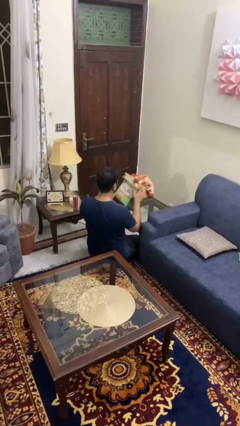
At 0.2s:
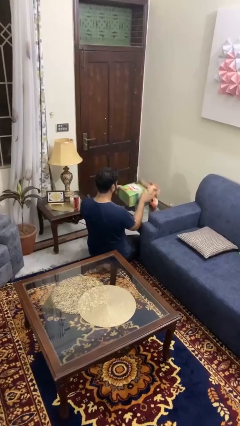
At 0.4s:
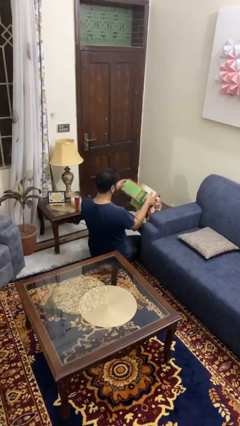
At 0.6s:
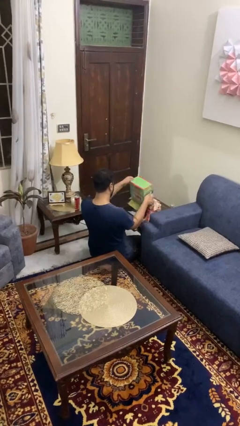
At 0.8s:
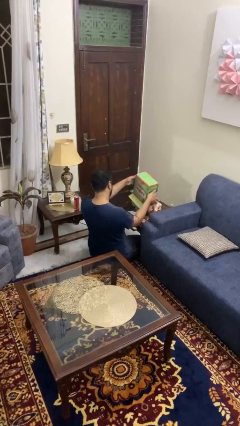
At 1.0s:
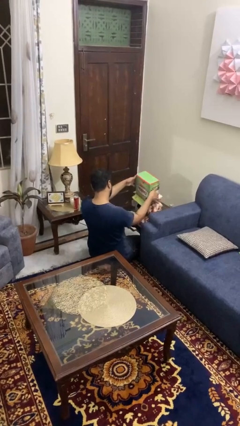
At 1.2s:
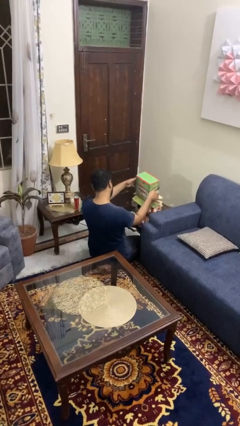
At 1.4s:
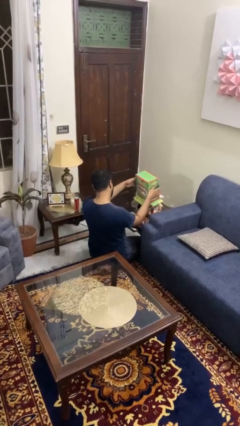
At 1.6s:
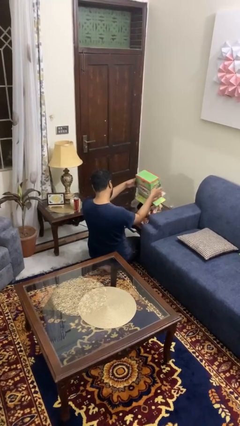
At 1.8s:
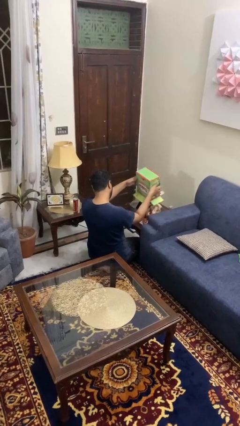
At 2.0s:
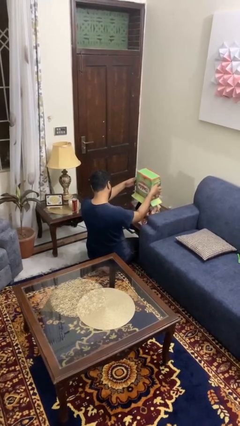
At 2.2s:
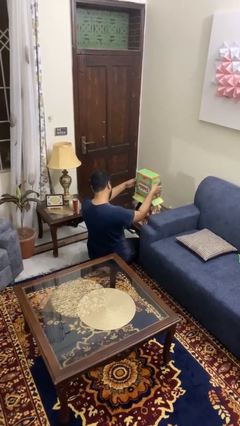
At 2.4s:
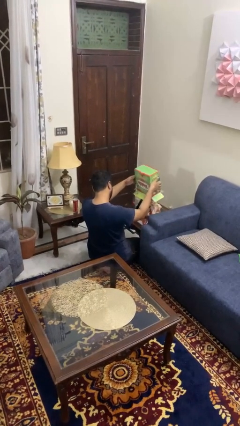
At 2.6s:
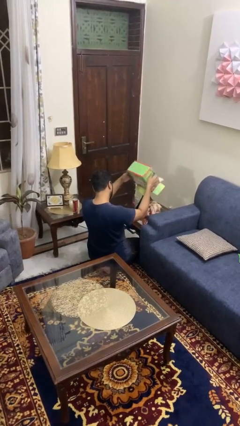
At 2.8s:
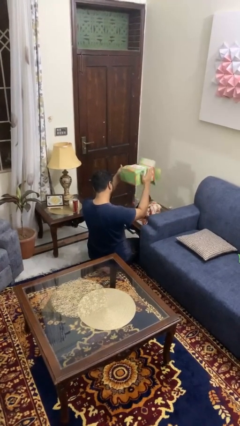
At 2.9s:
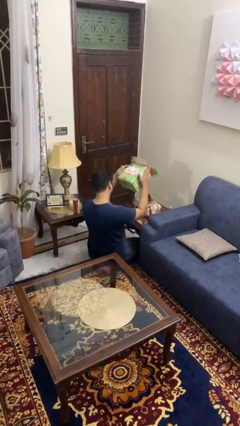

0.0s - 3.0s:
person unloads box onto table

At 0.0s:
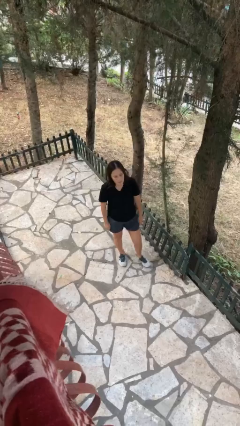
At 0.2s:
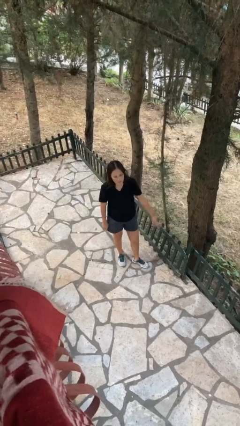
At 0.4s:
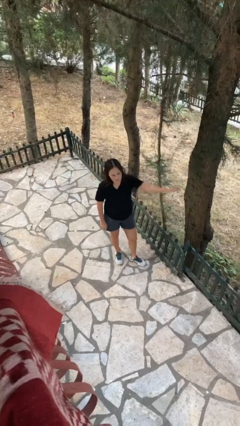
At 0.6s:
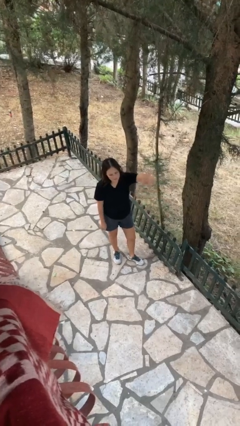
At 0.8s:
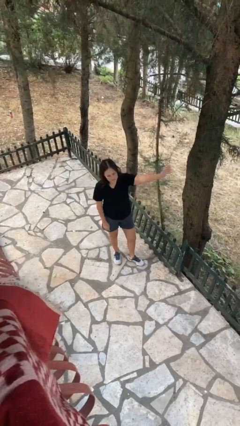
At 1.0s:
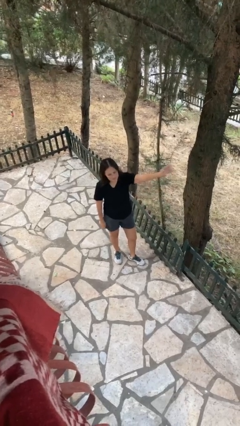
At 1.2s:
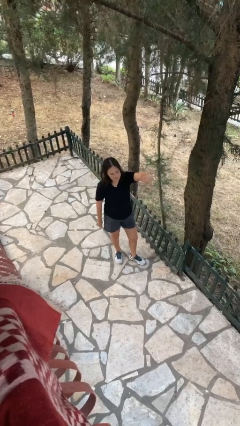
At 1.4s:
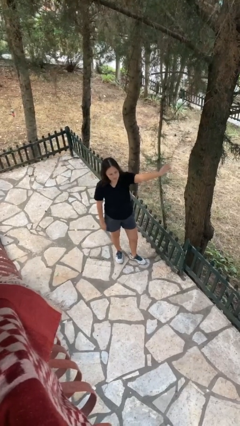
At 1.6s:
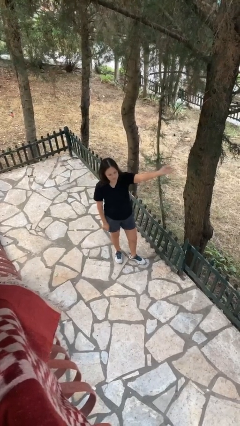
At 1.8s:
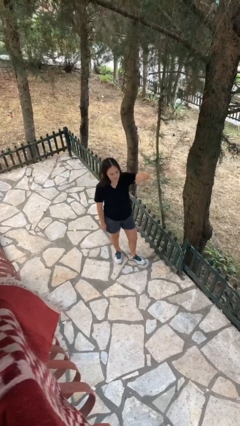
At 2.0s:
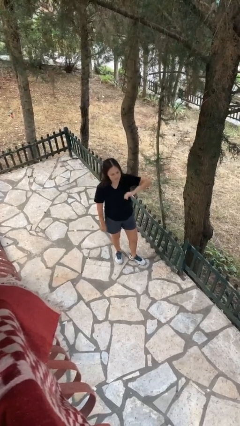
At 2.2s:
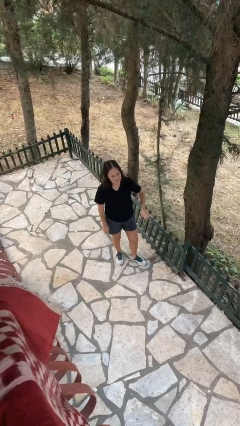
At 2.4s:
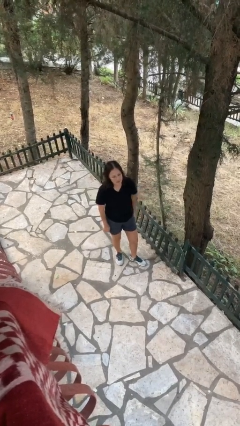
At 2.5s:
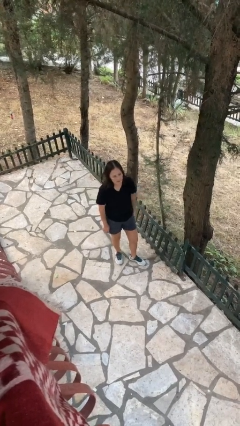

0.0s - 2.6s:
person waves at person

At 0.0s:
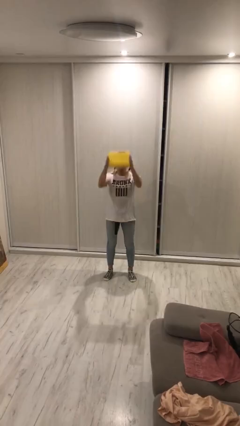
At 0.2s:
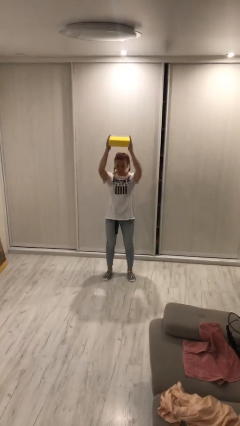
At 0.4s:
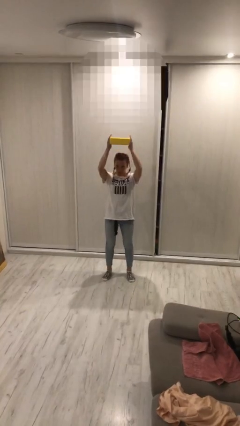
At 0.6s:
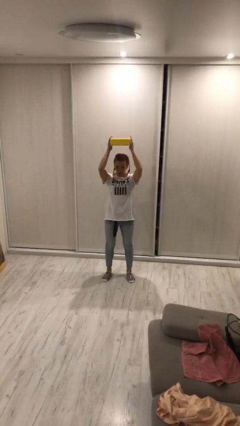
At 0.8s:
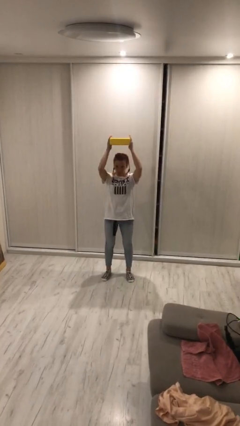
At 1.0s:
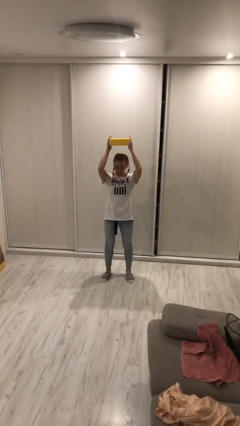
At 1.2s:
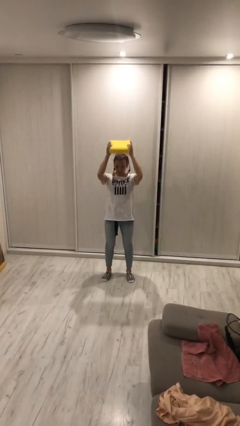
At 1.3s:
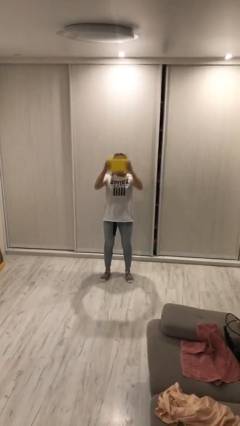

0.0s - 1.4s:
person holds object above head

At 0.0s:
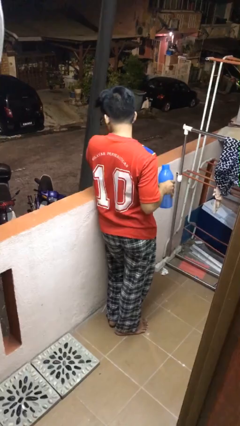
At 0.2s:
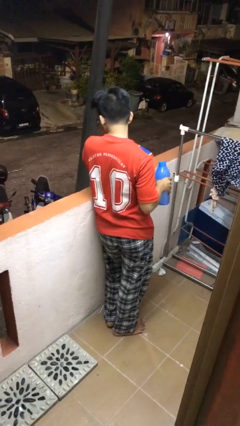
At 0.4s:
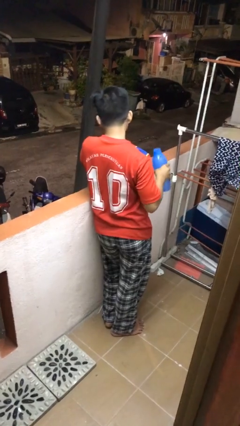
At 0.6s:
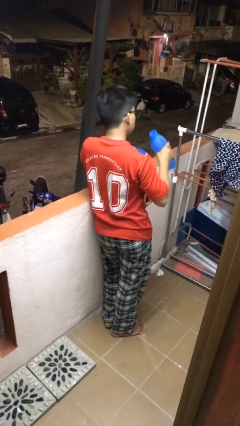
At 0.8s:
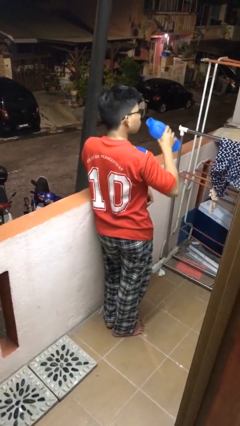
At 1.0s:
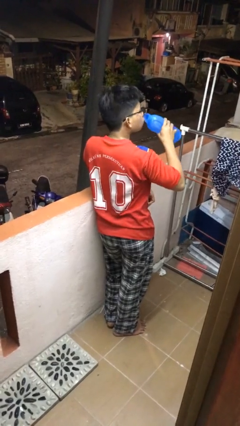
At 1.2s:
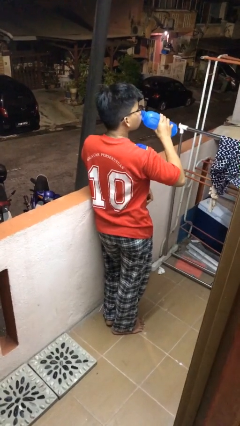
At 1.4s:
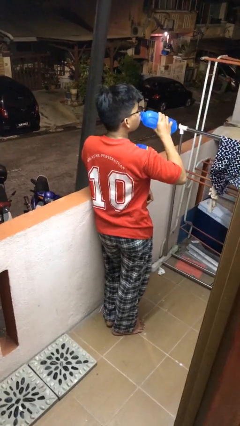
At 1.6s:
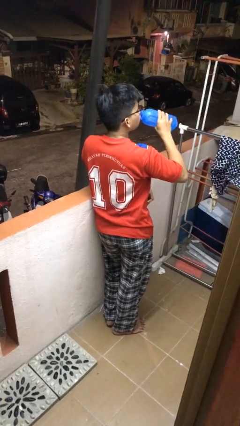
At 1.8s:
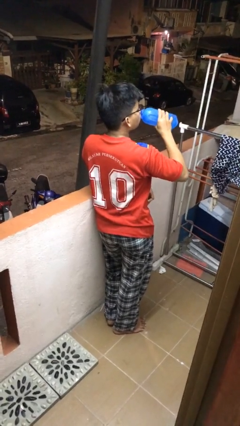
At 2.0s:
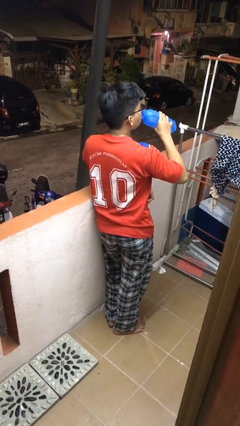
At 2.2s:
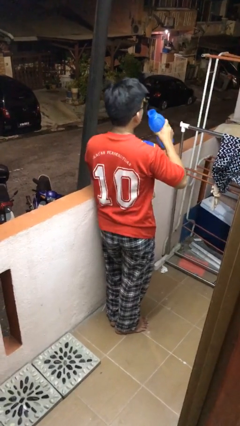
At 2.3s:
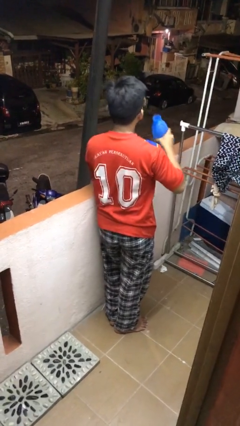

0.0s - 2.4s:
person drinks from bottle

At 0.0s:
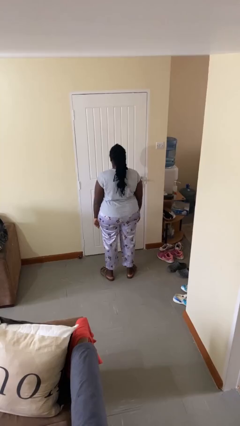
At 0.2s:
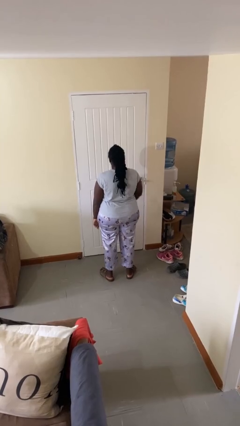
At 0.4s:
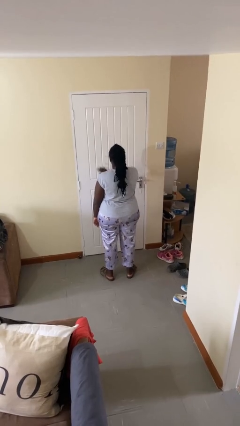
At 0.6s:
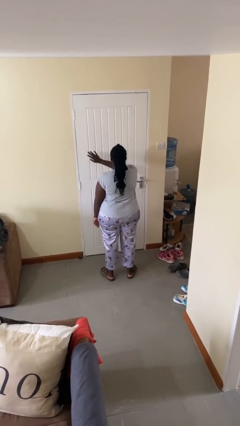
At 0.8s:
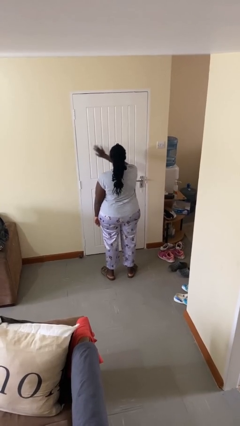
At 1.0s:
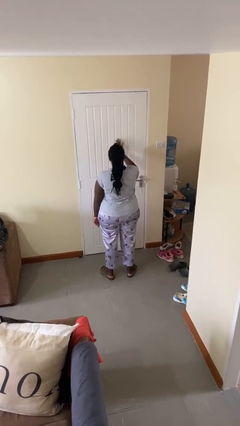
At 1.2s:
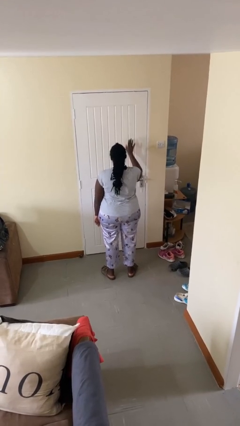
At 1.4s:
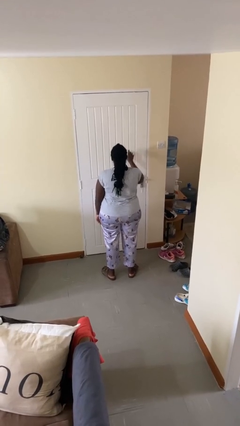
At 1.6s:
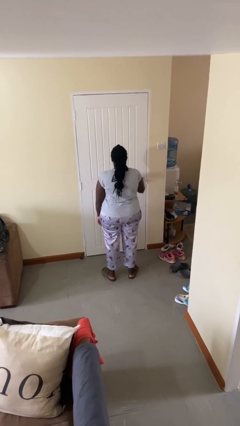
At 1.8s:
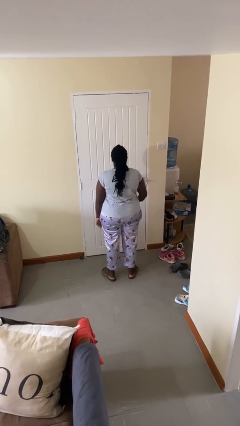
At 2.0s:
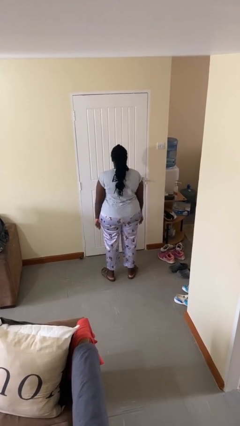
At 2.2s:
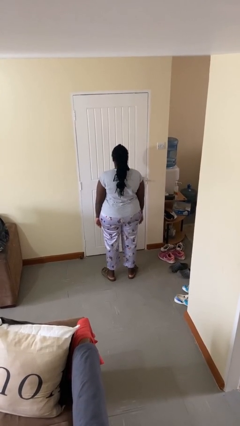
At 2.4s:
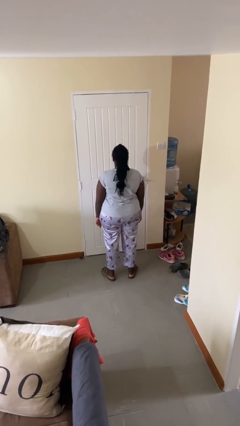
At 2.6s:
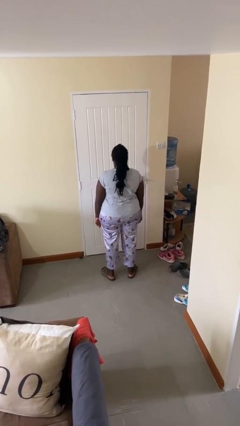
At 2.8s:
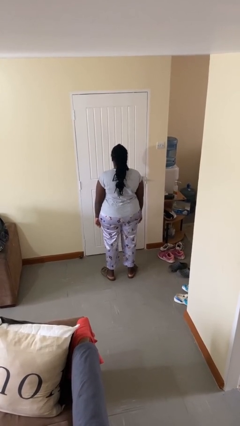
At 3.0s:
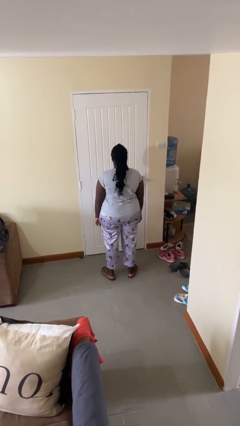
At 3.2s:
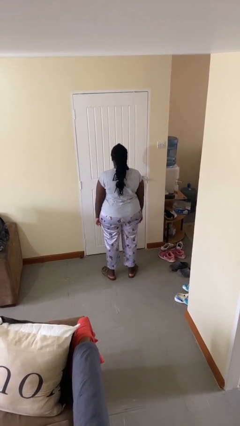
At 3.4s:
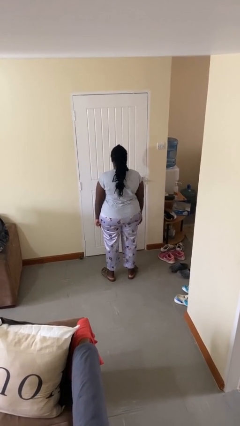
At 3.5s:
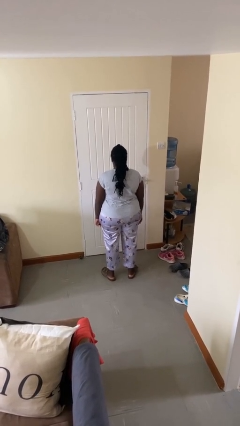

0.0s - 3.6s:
person gestures swipe right

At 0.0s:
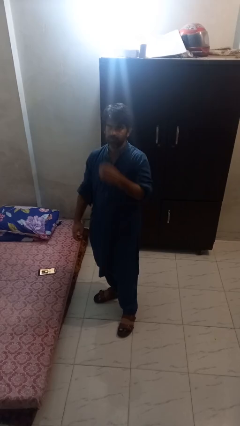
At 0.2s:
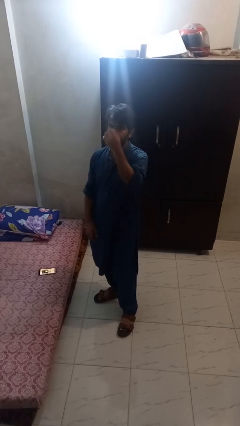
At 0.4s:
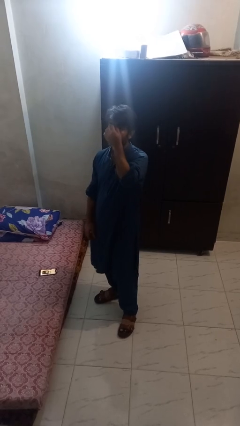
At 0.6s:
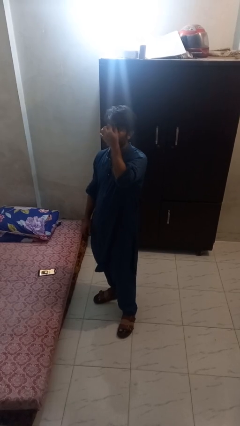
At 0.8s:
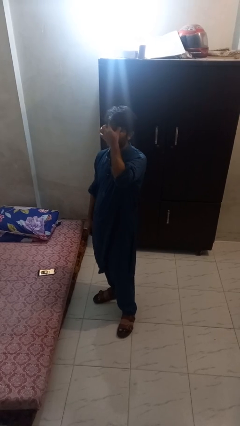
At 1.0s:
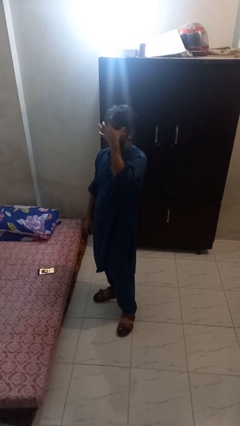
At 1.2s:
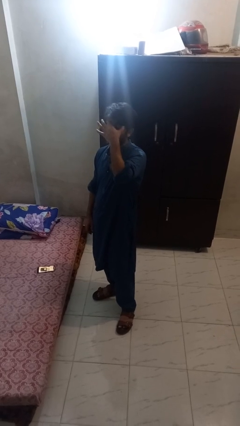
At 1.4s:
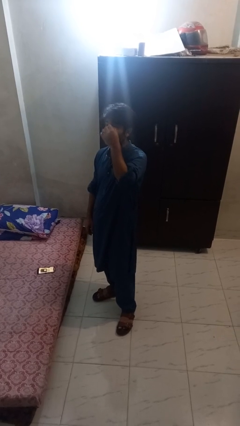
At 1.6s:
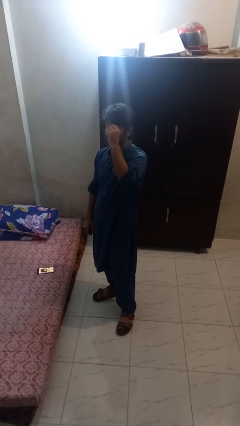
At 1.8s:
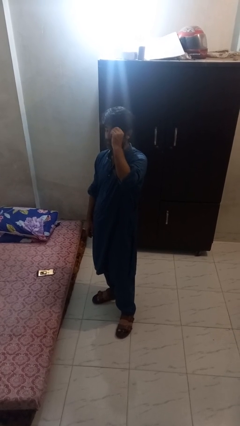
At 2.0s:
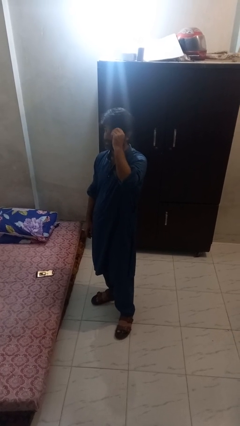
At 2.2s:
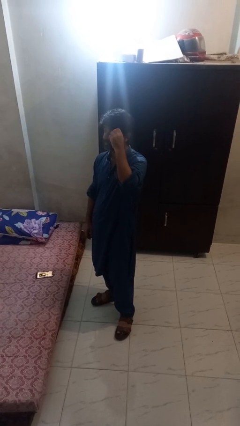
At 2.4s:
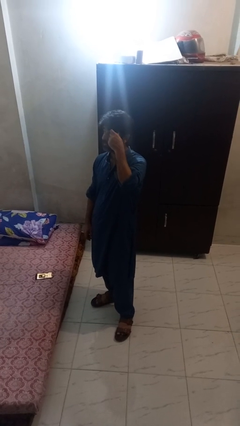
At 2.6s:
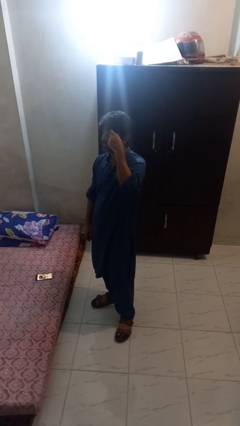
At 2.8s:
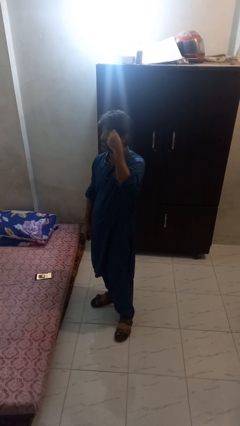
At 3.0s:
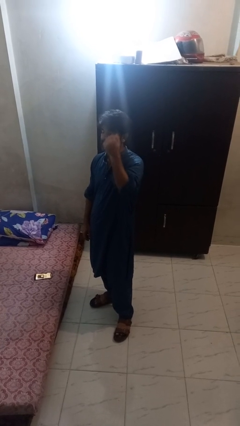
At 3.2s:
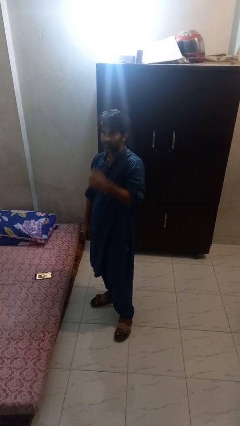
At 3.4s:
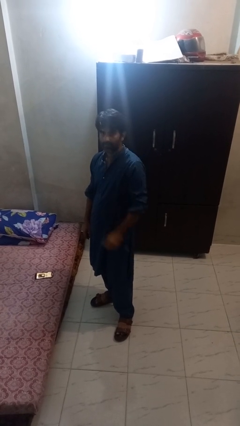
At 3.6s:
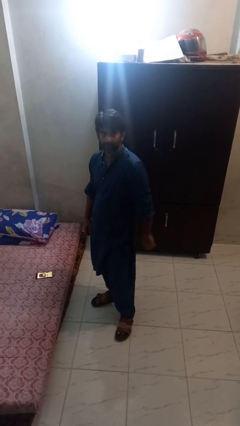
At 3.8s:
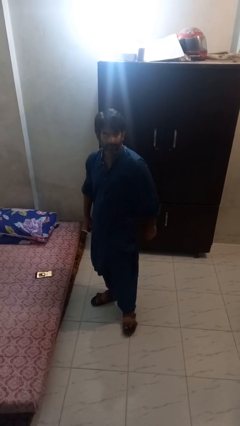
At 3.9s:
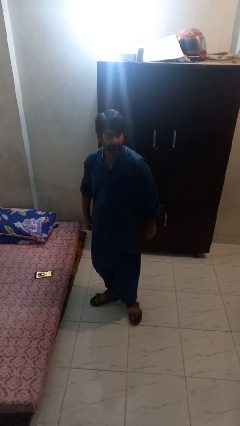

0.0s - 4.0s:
person scratches face

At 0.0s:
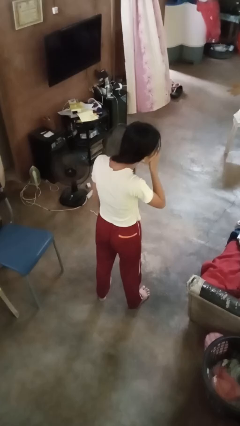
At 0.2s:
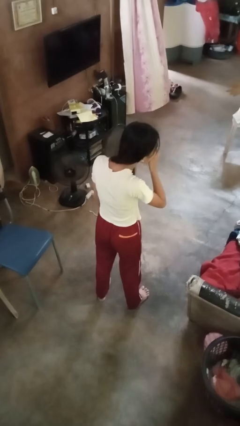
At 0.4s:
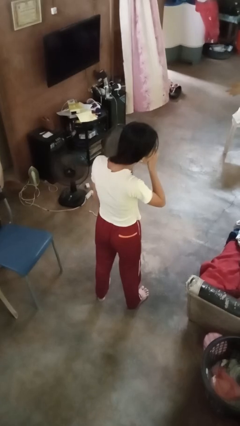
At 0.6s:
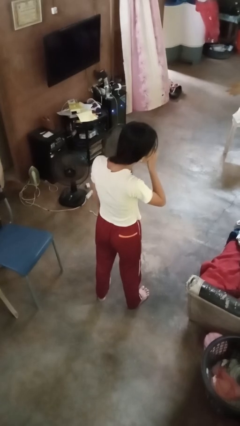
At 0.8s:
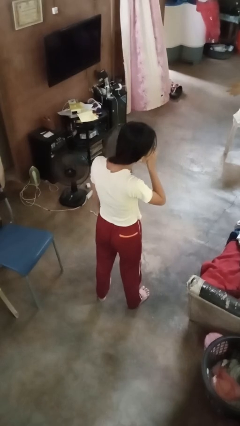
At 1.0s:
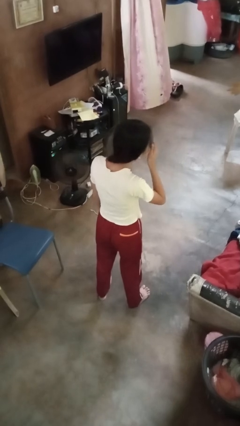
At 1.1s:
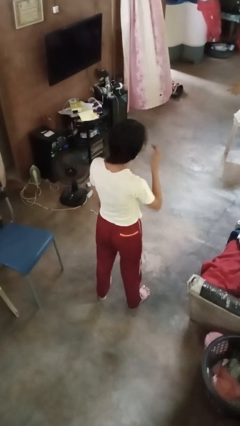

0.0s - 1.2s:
person sneezes into hand
